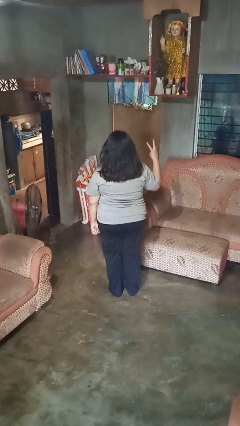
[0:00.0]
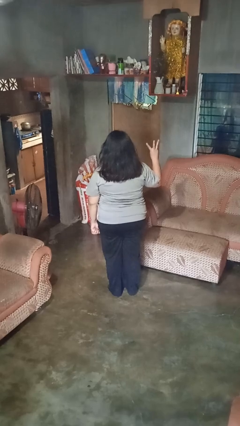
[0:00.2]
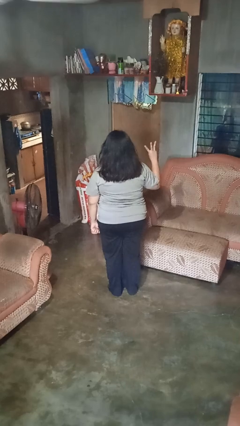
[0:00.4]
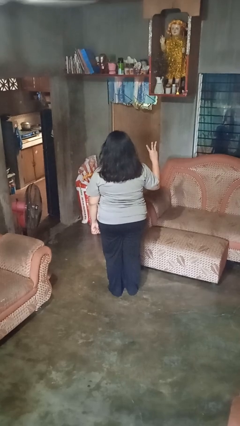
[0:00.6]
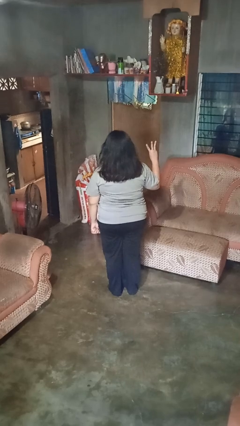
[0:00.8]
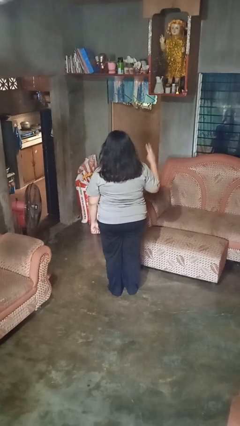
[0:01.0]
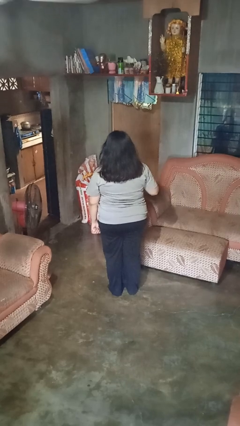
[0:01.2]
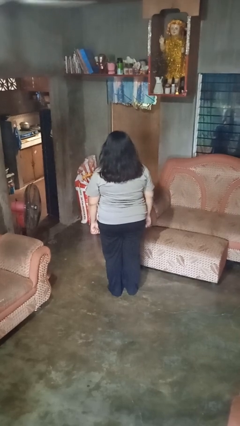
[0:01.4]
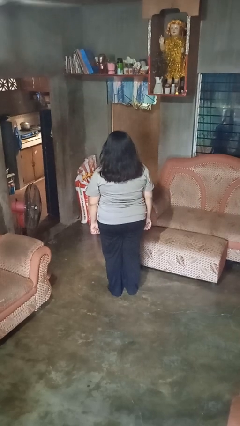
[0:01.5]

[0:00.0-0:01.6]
person gestures number three

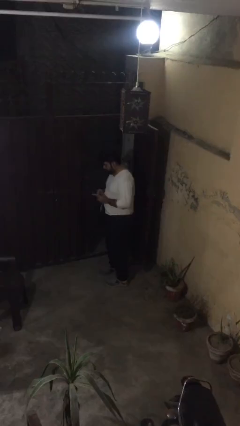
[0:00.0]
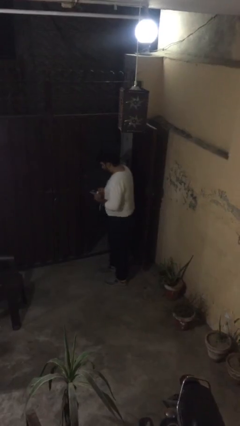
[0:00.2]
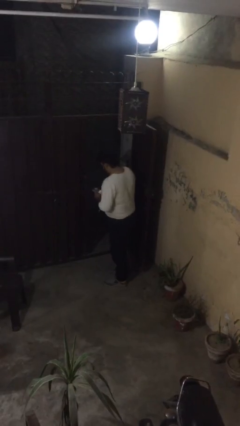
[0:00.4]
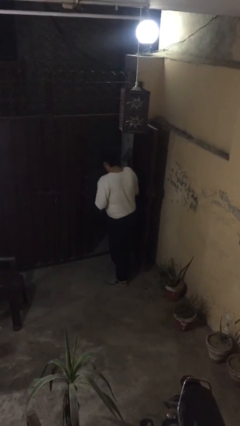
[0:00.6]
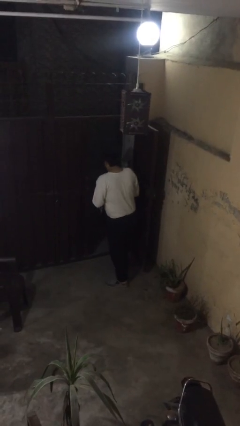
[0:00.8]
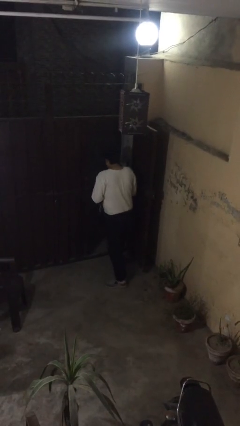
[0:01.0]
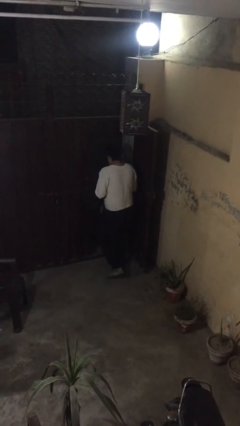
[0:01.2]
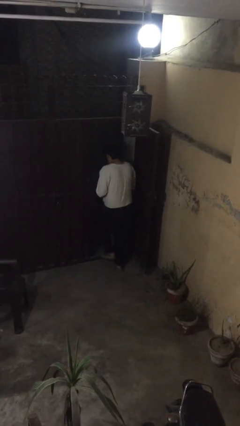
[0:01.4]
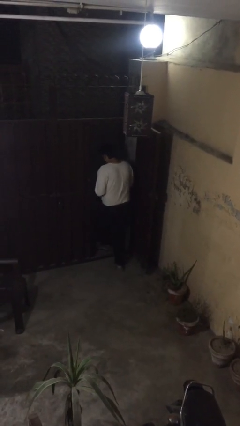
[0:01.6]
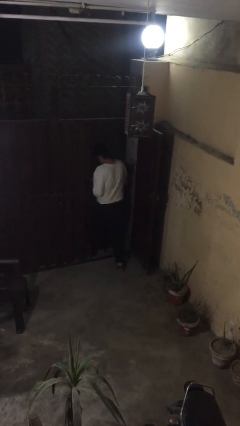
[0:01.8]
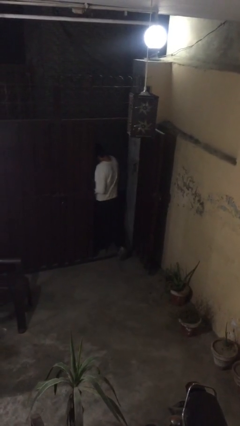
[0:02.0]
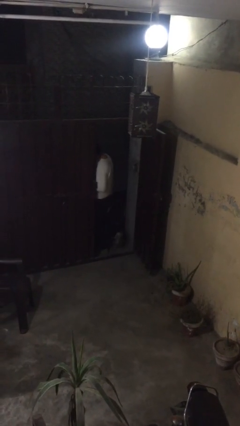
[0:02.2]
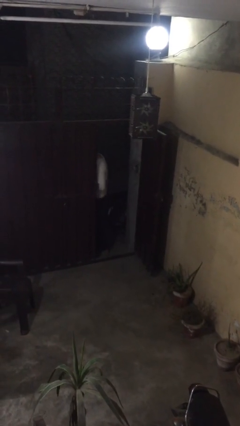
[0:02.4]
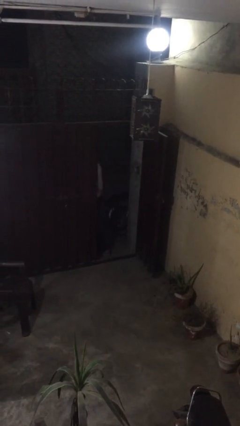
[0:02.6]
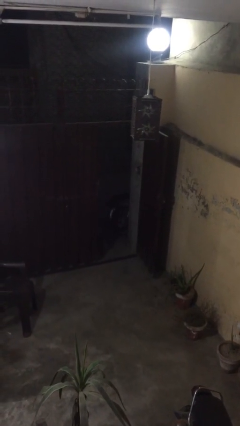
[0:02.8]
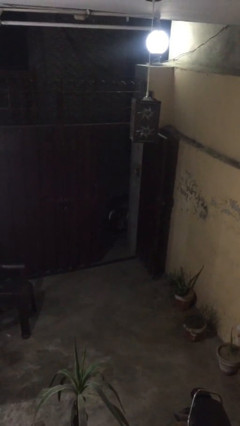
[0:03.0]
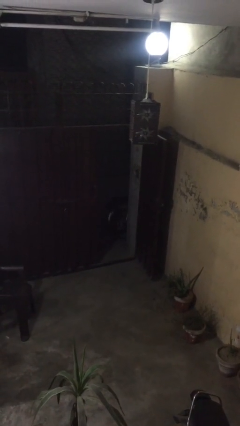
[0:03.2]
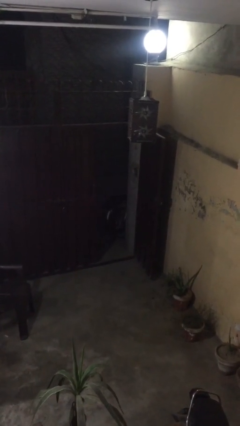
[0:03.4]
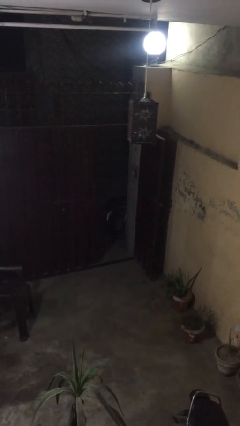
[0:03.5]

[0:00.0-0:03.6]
person exits scene through structure

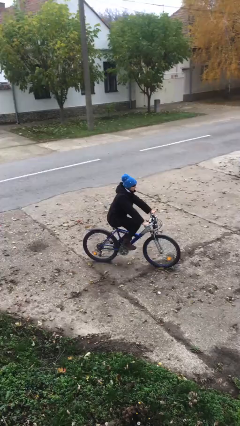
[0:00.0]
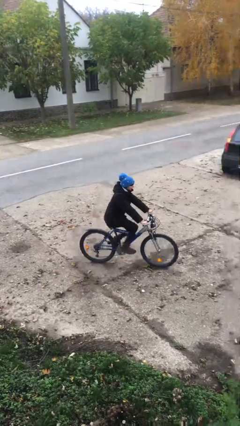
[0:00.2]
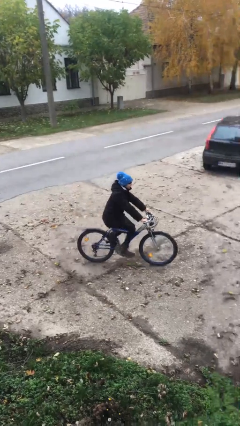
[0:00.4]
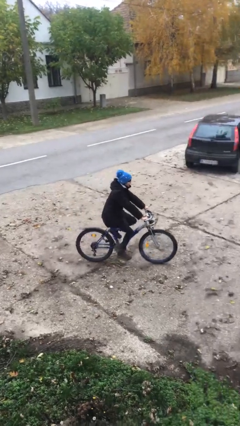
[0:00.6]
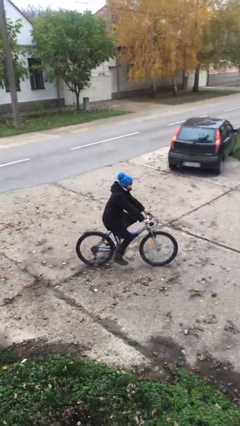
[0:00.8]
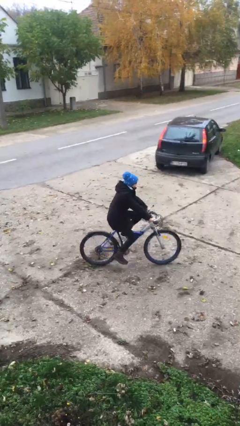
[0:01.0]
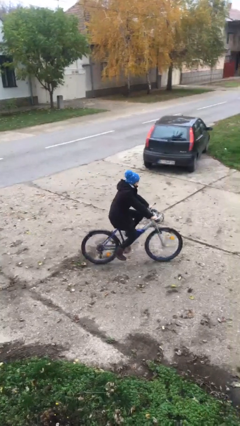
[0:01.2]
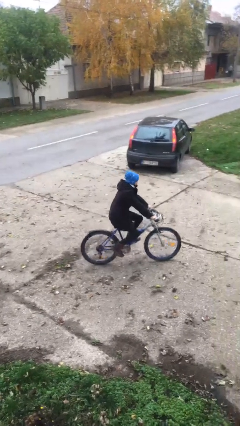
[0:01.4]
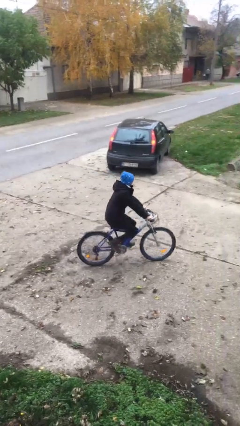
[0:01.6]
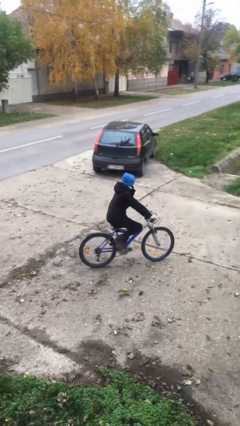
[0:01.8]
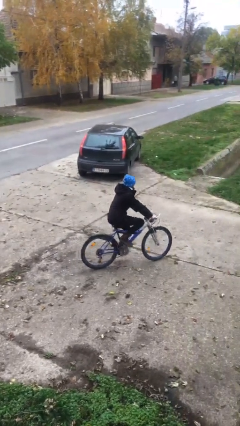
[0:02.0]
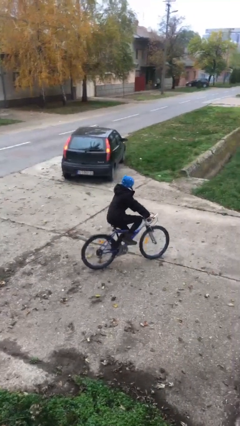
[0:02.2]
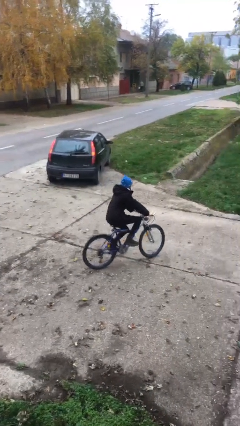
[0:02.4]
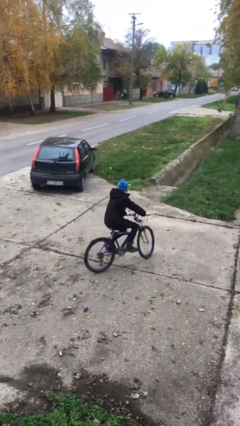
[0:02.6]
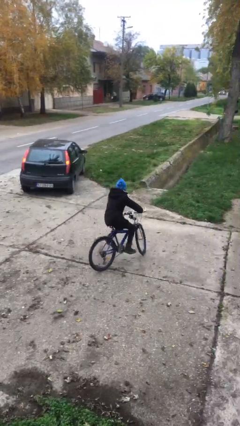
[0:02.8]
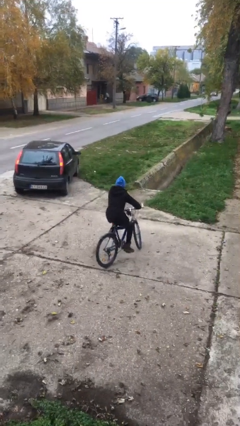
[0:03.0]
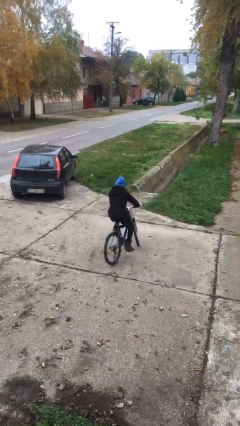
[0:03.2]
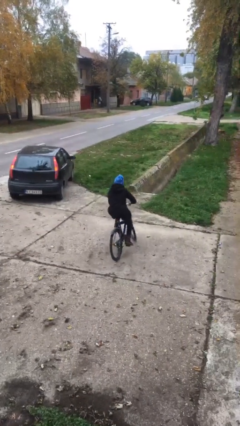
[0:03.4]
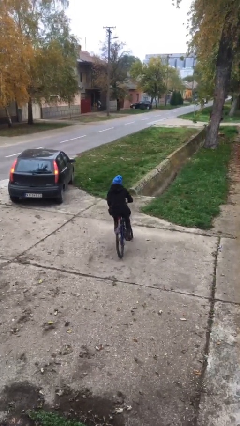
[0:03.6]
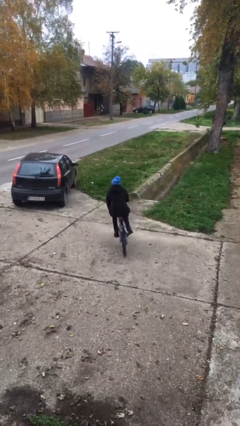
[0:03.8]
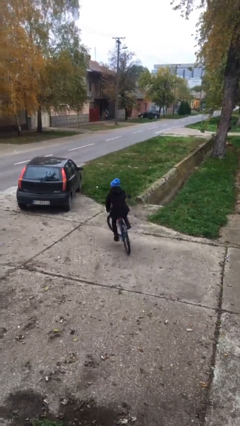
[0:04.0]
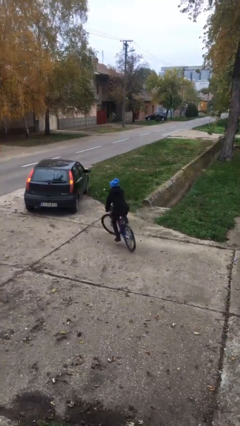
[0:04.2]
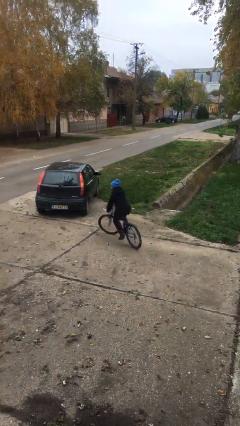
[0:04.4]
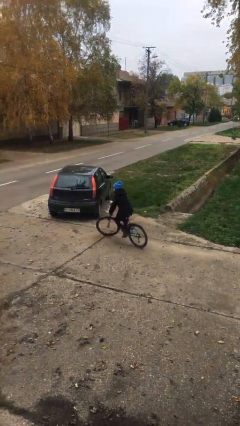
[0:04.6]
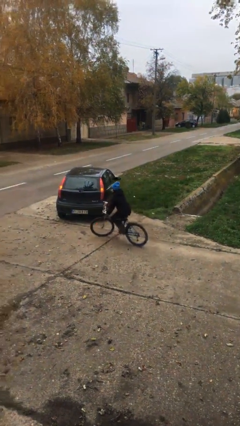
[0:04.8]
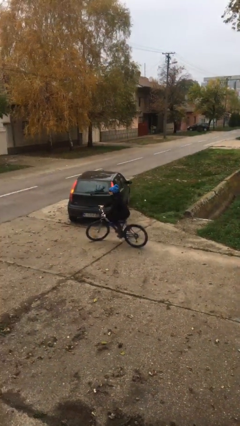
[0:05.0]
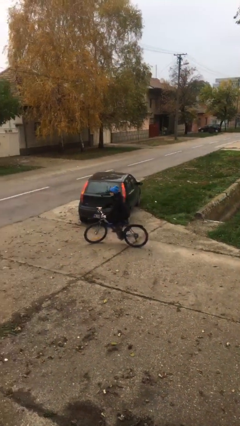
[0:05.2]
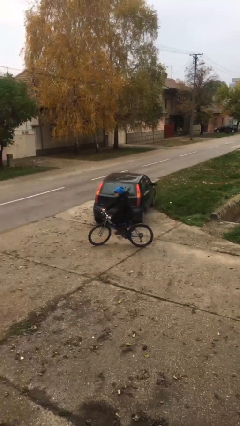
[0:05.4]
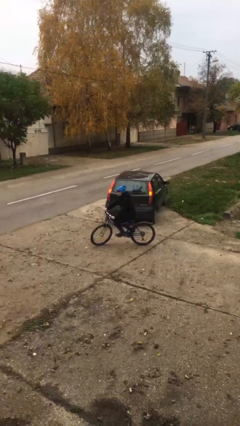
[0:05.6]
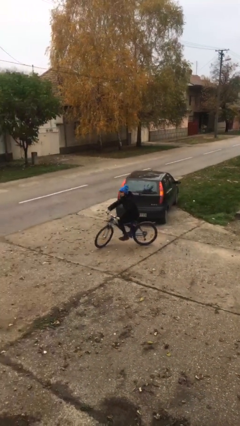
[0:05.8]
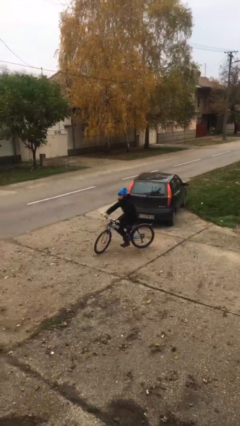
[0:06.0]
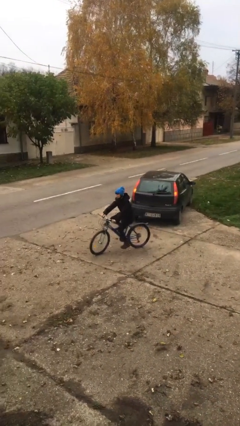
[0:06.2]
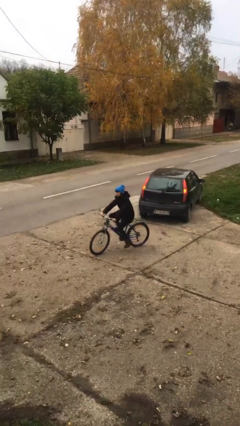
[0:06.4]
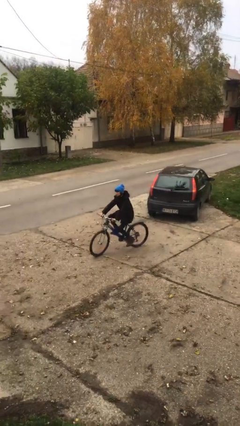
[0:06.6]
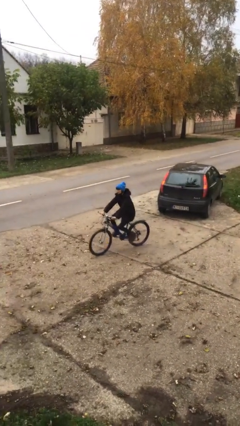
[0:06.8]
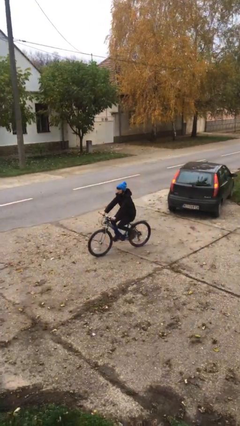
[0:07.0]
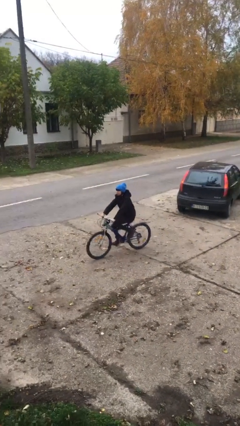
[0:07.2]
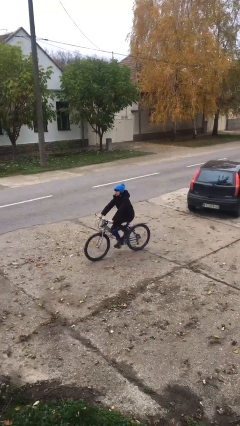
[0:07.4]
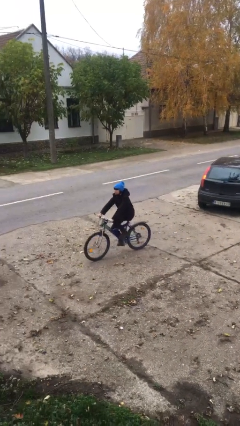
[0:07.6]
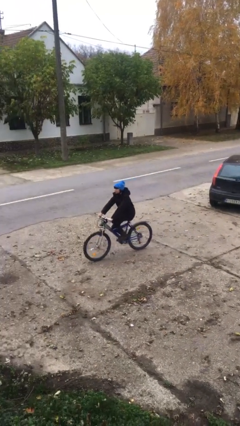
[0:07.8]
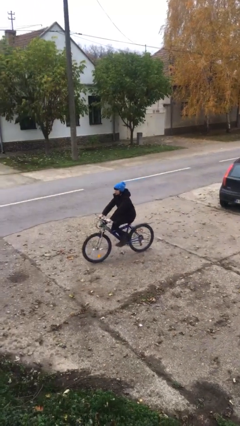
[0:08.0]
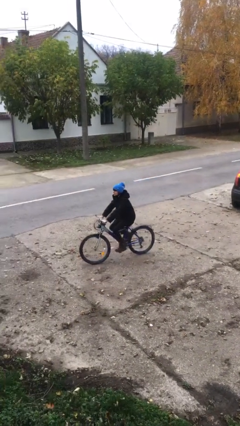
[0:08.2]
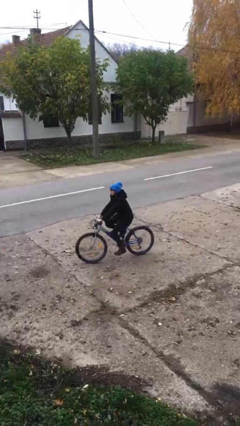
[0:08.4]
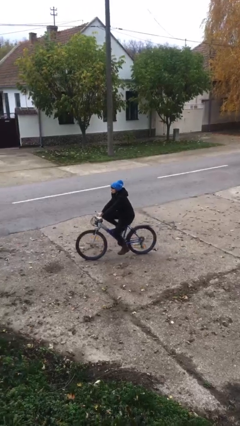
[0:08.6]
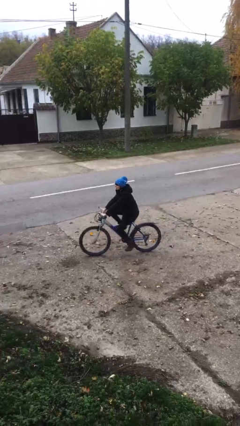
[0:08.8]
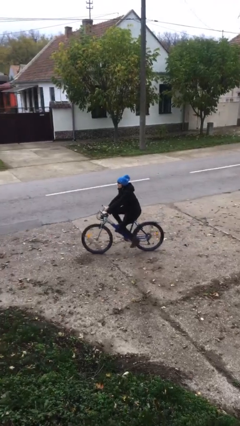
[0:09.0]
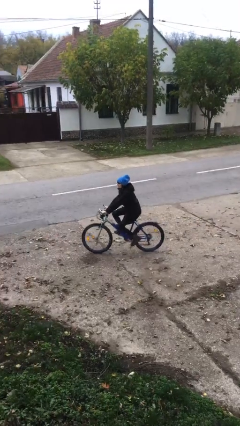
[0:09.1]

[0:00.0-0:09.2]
person rides bicycle

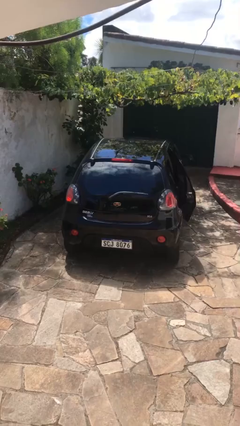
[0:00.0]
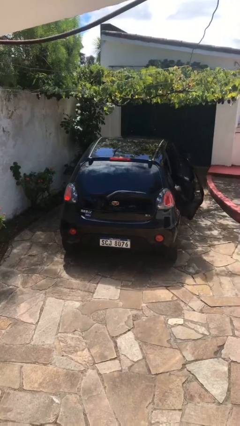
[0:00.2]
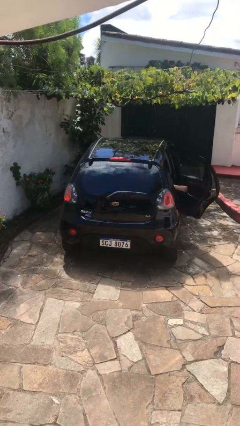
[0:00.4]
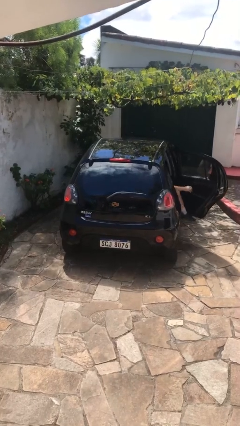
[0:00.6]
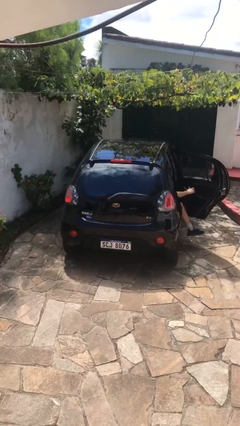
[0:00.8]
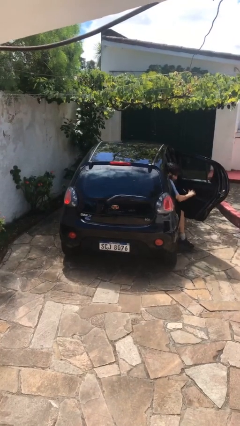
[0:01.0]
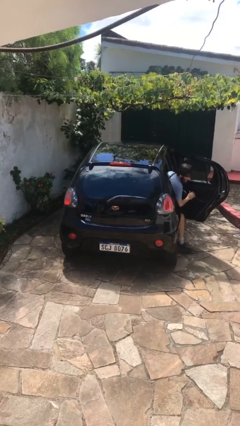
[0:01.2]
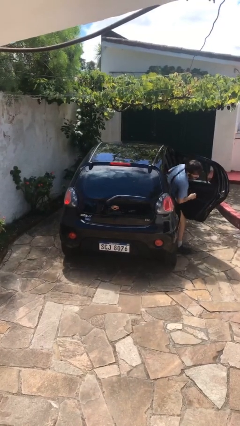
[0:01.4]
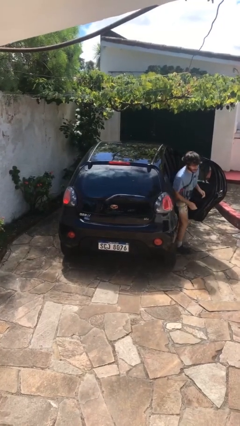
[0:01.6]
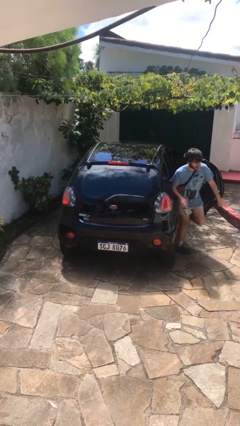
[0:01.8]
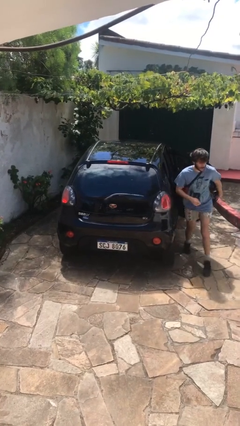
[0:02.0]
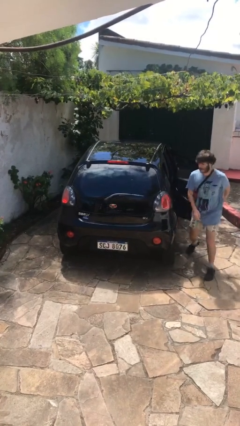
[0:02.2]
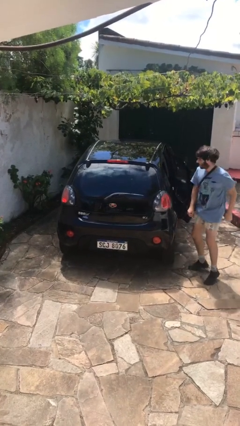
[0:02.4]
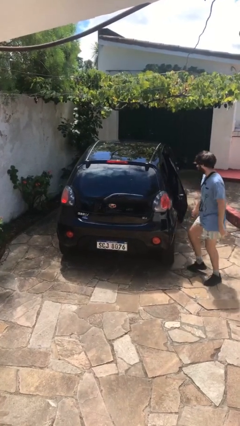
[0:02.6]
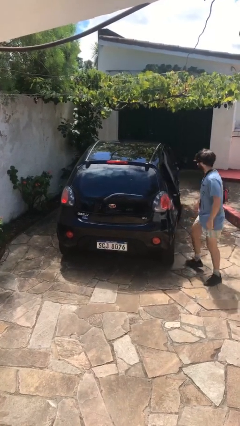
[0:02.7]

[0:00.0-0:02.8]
car drops off person

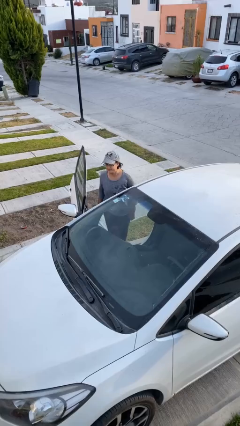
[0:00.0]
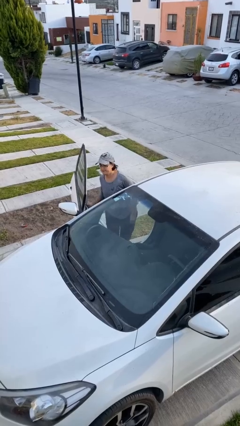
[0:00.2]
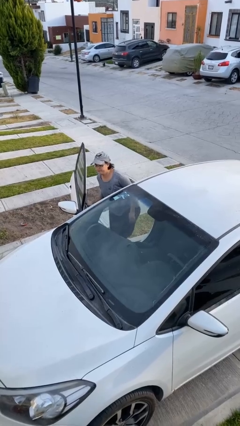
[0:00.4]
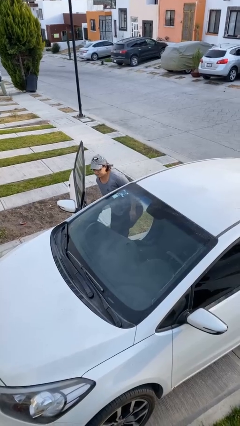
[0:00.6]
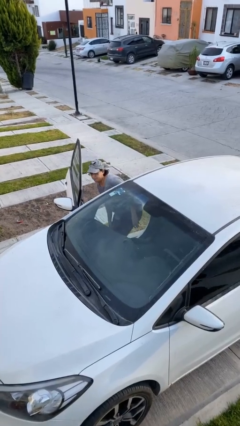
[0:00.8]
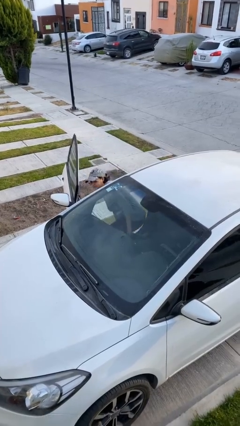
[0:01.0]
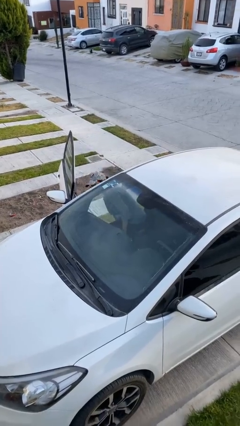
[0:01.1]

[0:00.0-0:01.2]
person enters car
